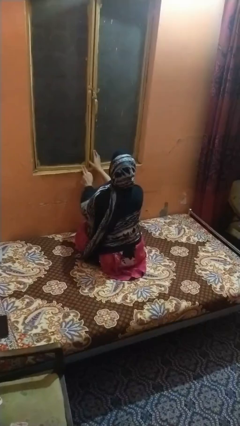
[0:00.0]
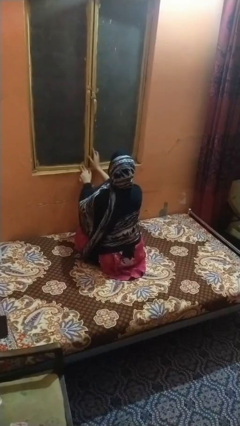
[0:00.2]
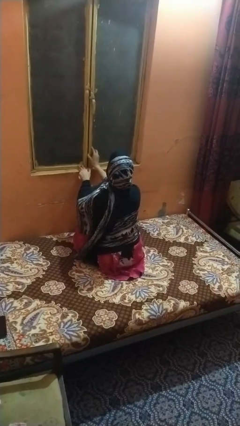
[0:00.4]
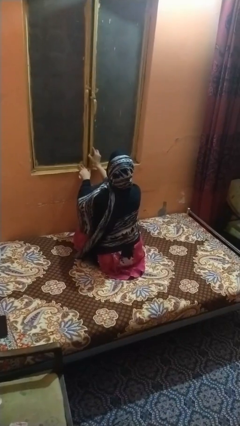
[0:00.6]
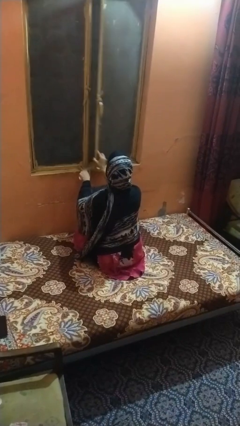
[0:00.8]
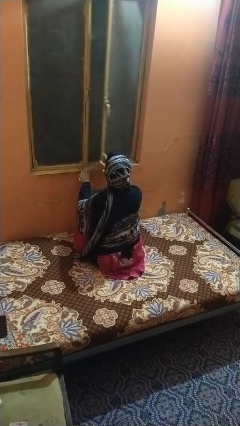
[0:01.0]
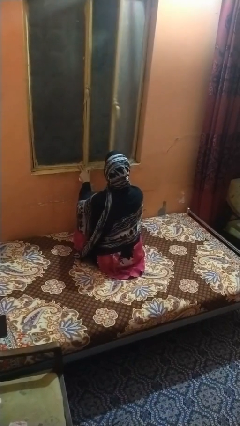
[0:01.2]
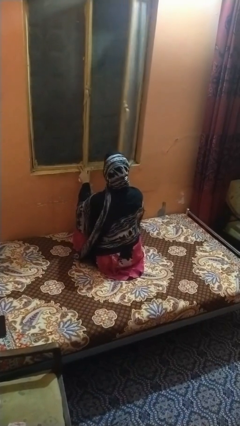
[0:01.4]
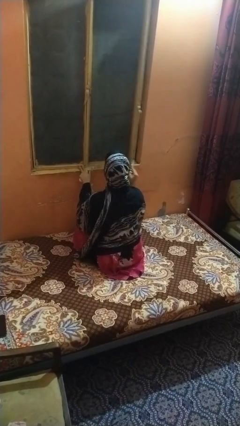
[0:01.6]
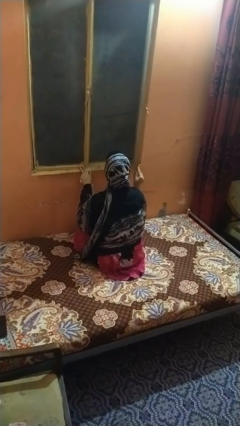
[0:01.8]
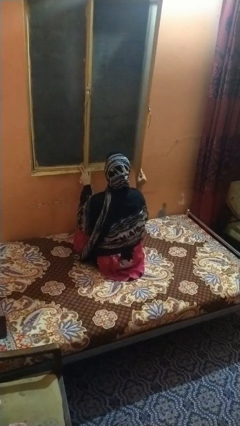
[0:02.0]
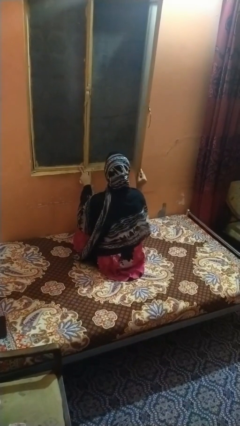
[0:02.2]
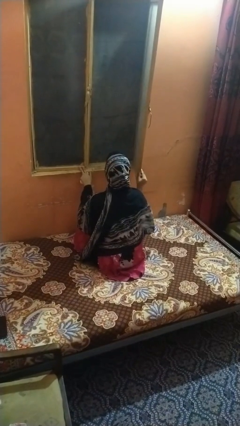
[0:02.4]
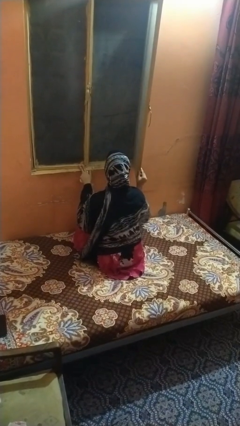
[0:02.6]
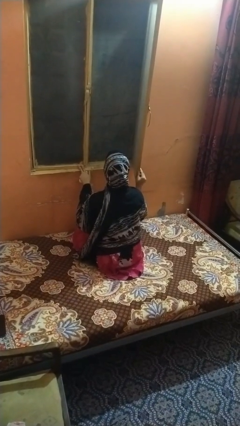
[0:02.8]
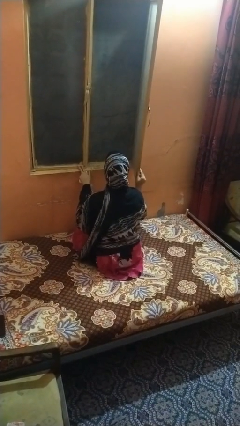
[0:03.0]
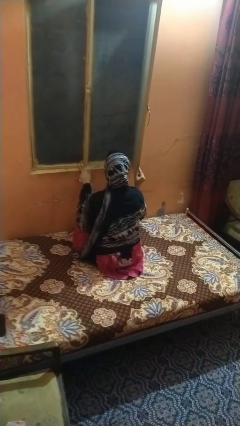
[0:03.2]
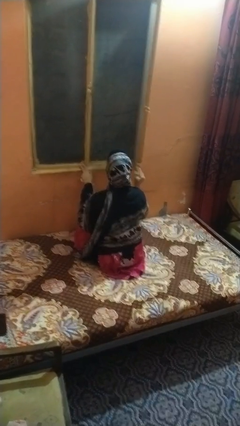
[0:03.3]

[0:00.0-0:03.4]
person opens home window

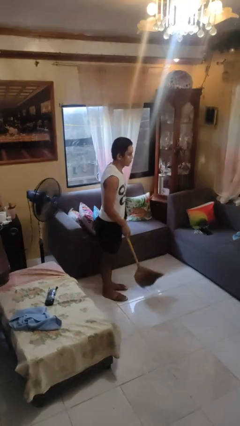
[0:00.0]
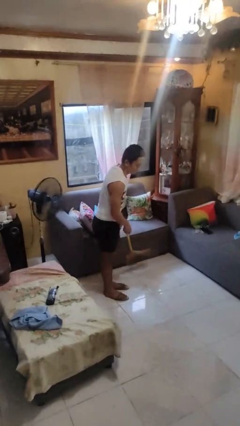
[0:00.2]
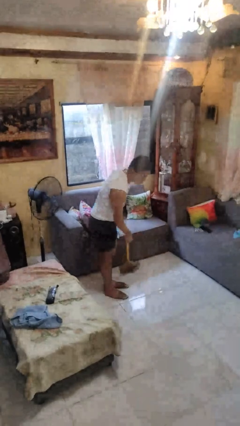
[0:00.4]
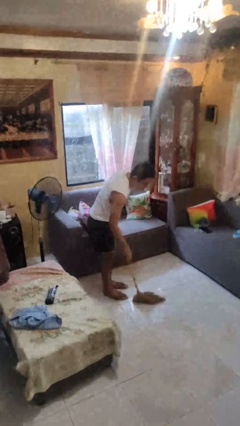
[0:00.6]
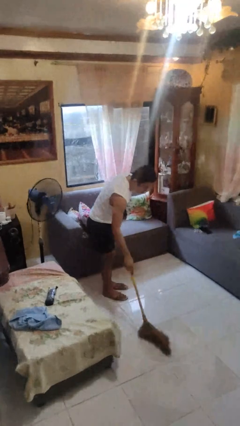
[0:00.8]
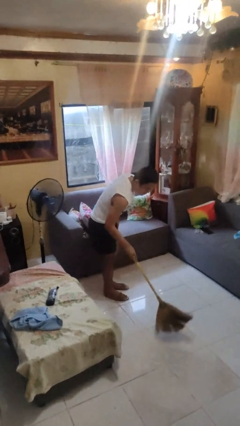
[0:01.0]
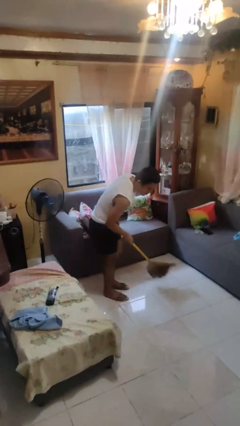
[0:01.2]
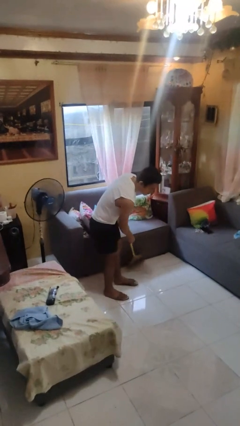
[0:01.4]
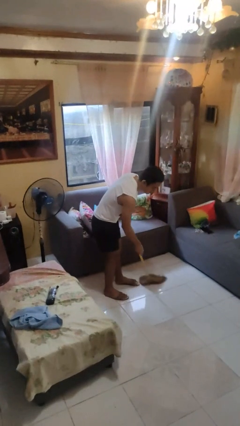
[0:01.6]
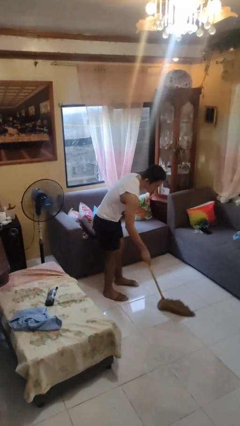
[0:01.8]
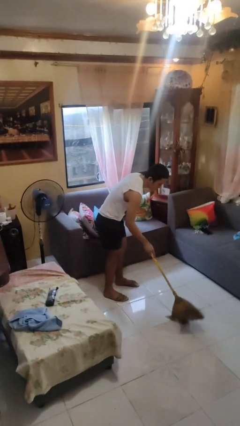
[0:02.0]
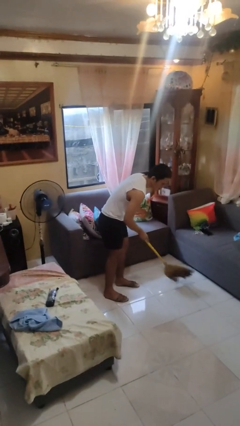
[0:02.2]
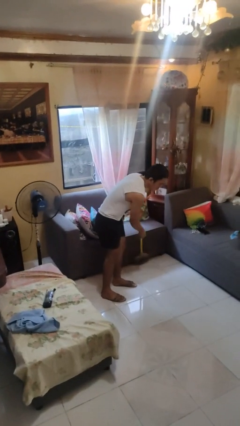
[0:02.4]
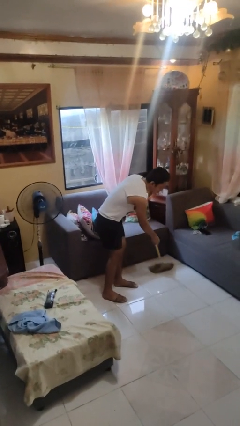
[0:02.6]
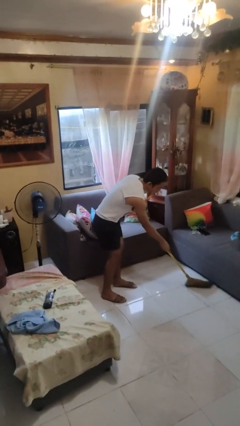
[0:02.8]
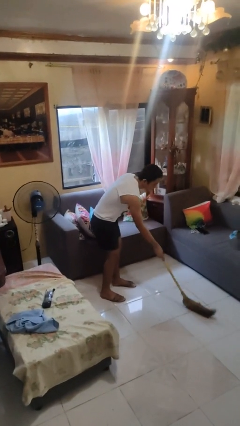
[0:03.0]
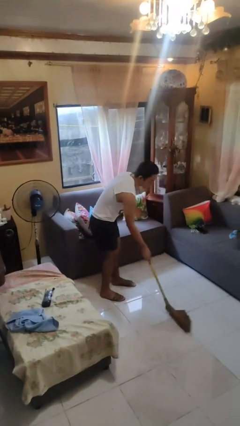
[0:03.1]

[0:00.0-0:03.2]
person sweeps floor

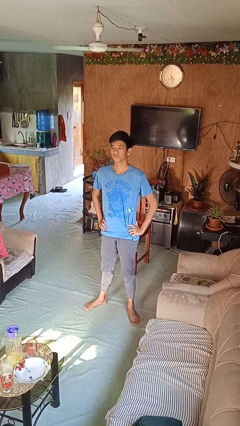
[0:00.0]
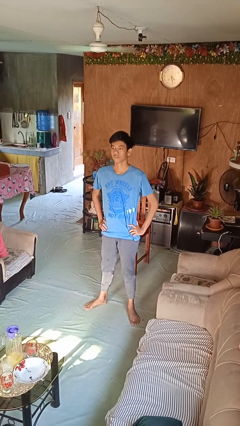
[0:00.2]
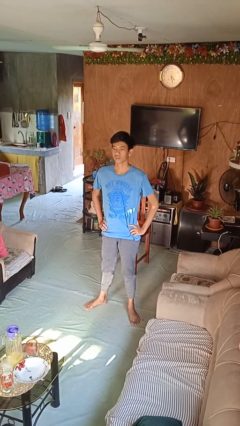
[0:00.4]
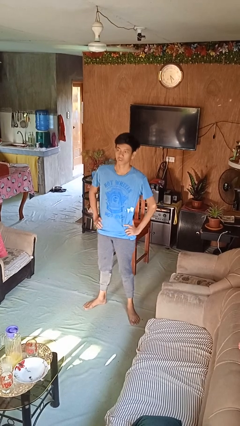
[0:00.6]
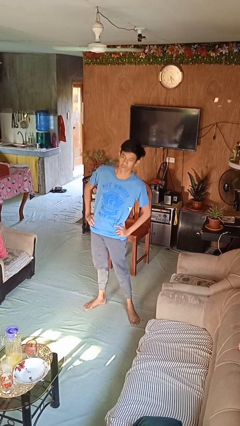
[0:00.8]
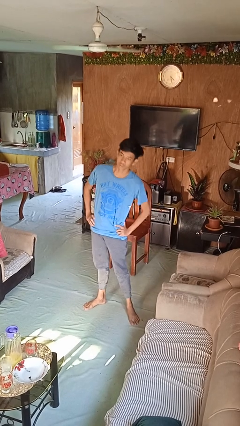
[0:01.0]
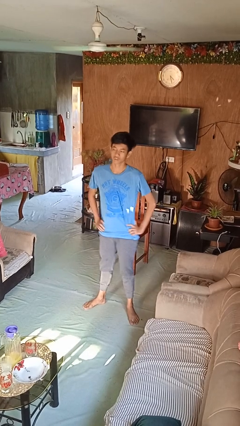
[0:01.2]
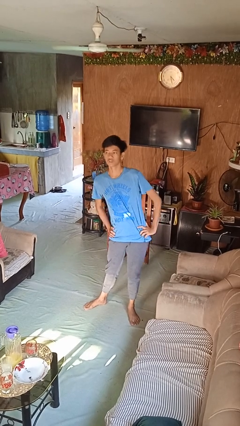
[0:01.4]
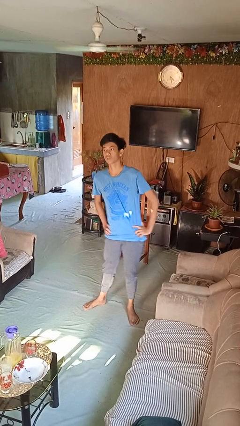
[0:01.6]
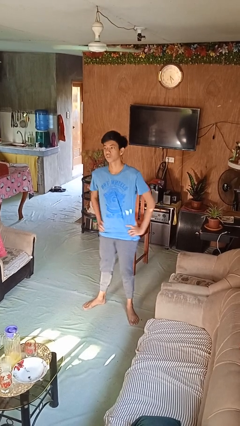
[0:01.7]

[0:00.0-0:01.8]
person wiggles hips

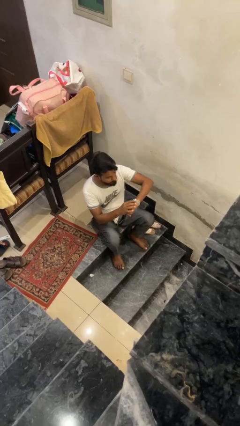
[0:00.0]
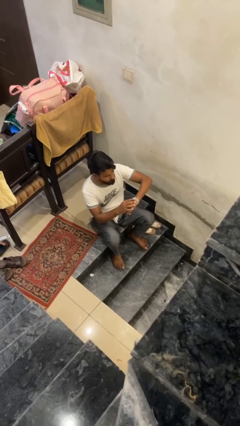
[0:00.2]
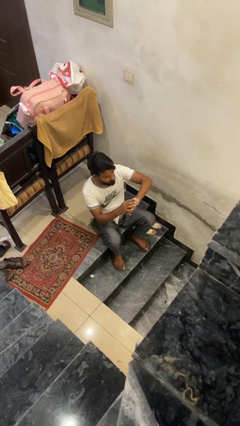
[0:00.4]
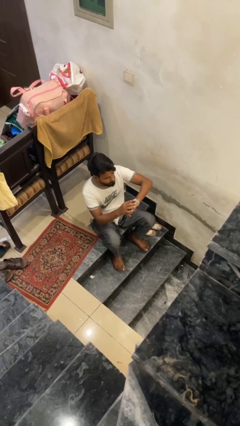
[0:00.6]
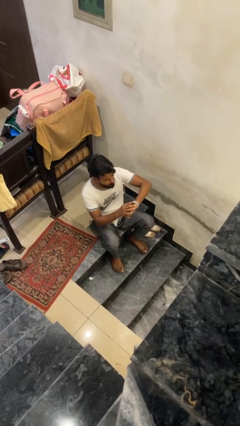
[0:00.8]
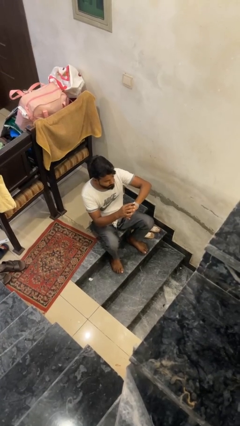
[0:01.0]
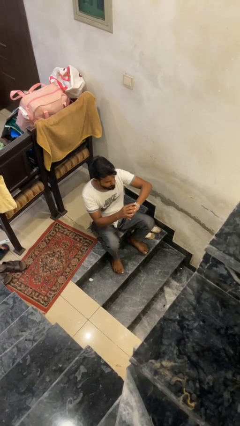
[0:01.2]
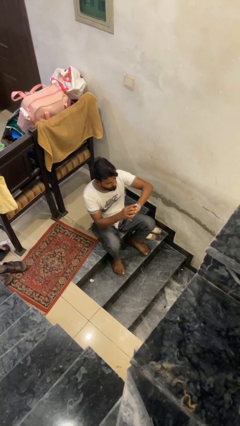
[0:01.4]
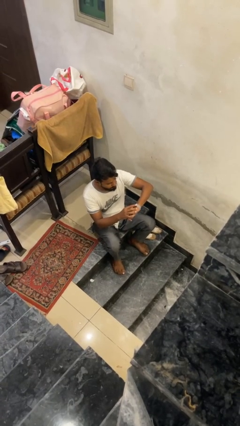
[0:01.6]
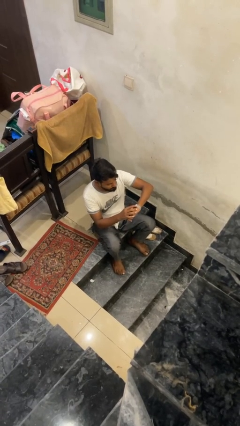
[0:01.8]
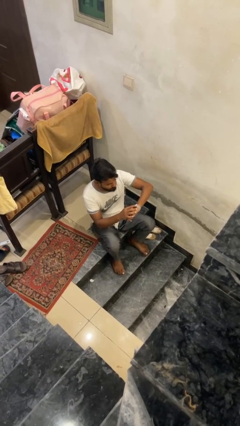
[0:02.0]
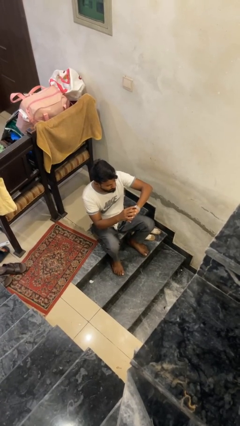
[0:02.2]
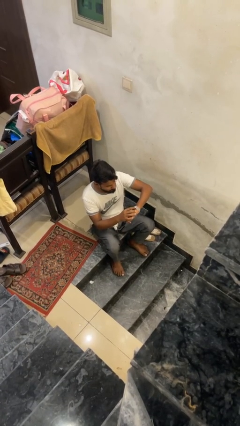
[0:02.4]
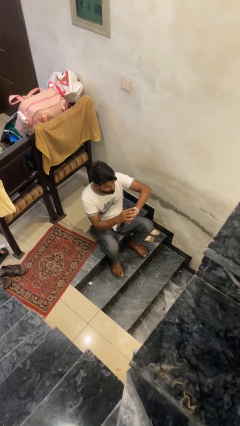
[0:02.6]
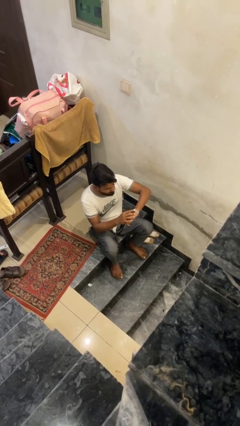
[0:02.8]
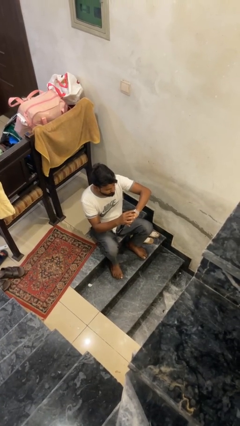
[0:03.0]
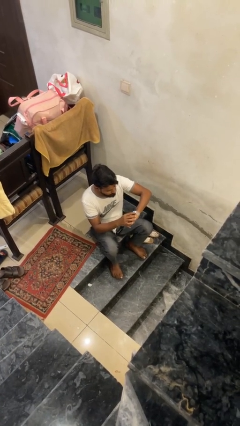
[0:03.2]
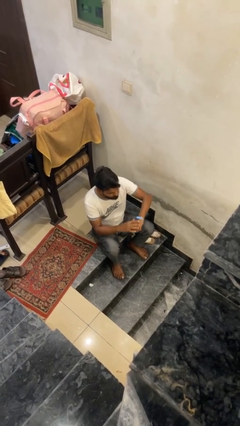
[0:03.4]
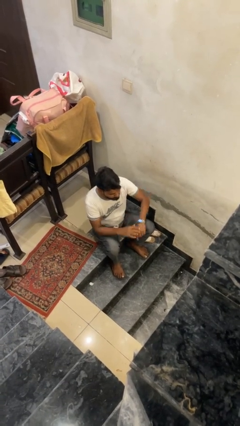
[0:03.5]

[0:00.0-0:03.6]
person looks at wristwatch

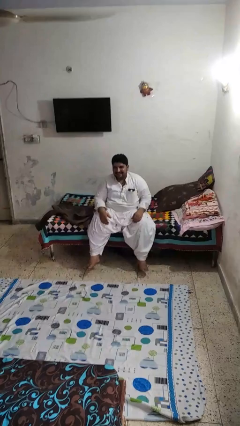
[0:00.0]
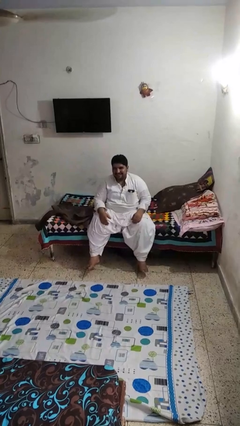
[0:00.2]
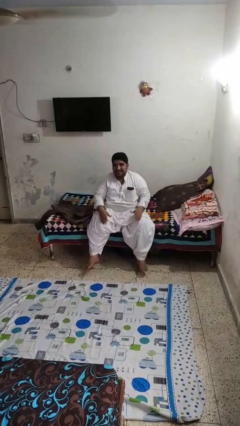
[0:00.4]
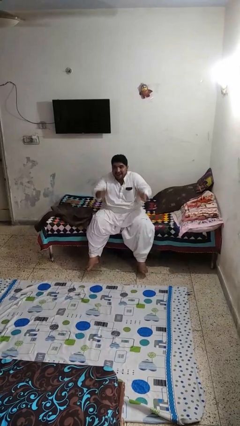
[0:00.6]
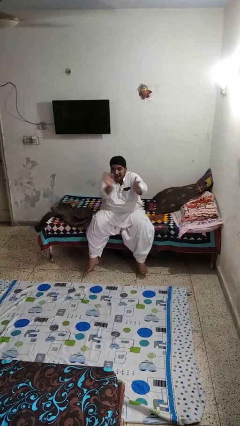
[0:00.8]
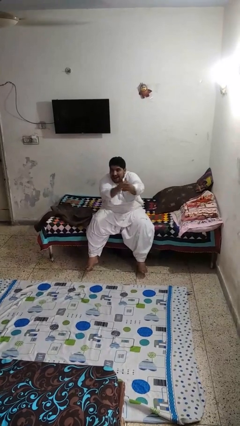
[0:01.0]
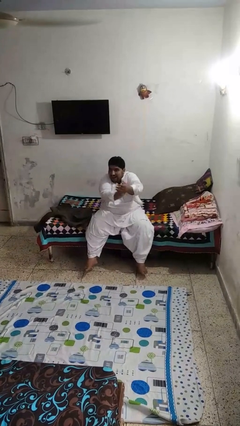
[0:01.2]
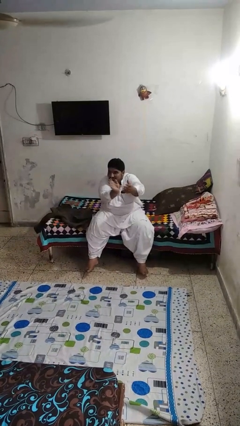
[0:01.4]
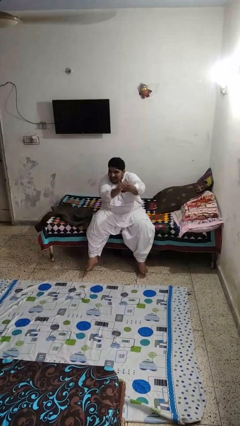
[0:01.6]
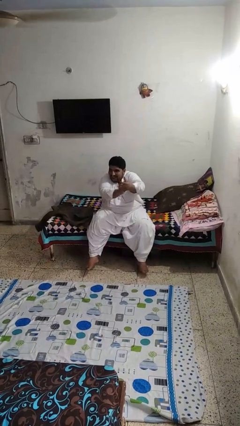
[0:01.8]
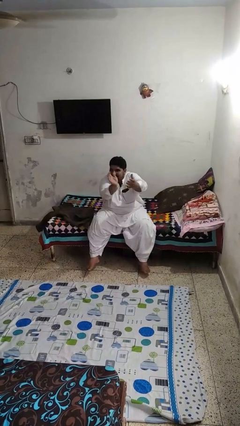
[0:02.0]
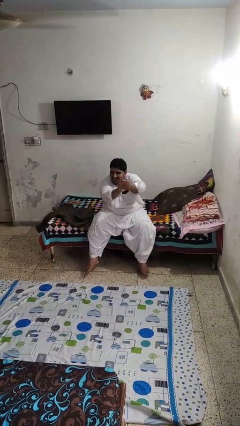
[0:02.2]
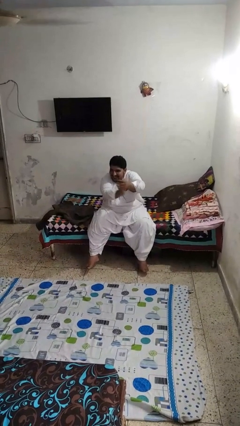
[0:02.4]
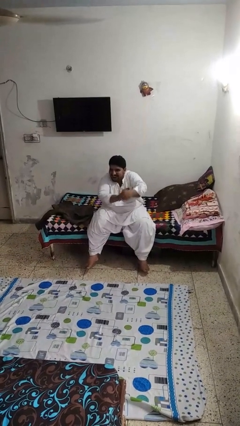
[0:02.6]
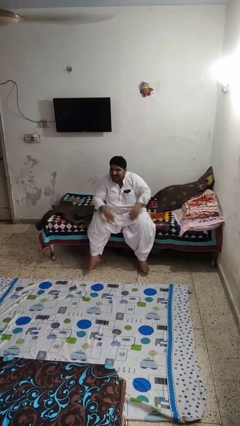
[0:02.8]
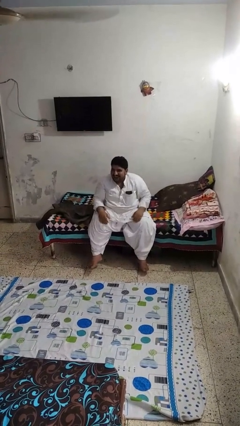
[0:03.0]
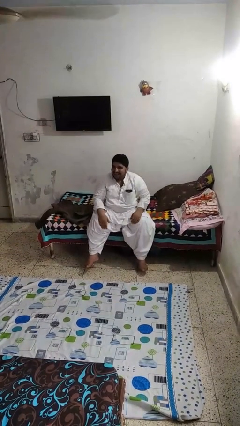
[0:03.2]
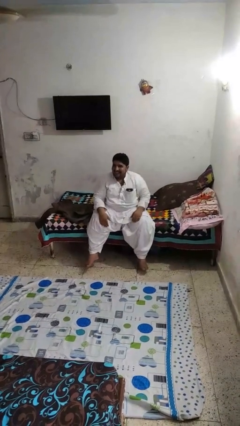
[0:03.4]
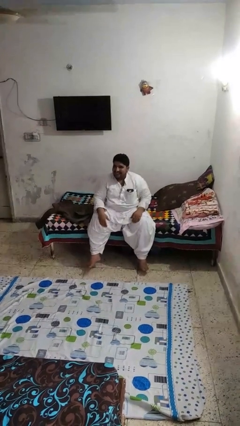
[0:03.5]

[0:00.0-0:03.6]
person claps hands

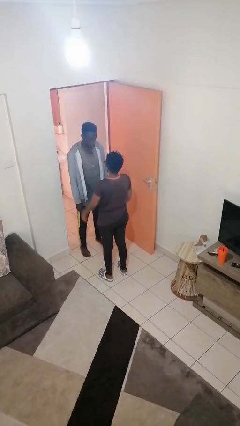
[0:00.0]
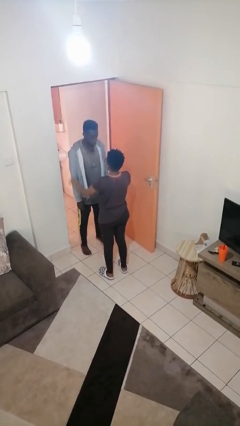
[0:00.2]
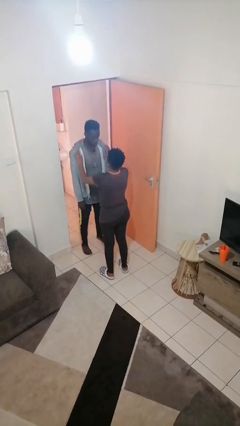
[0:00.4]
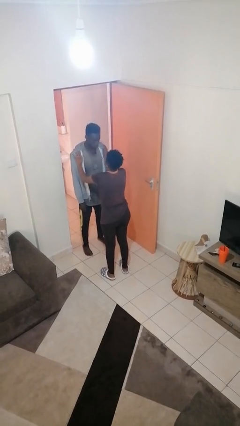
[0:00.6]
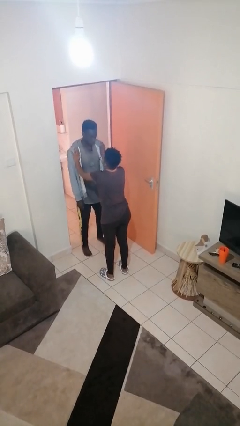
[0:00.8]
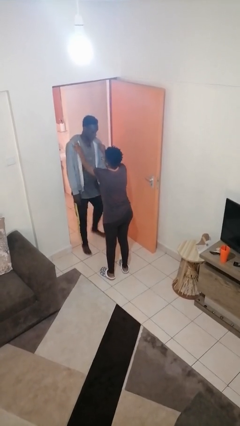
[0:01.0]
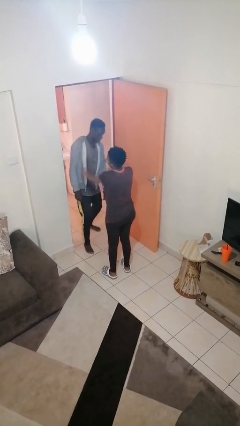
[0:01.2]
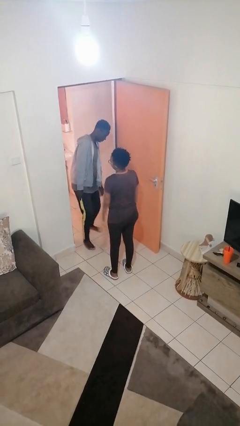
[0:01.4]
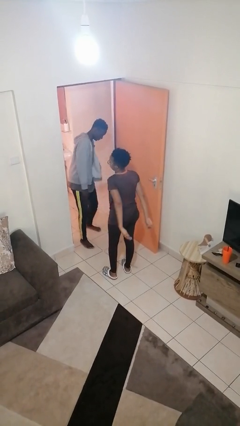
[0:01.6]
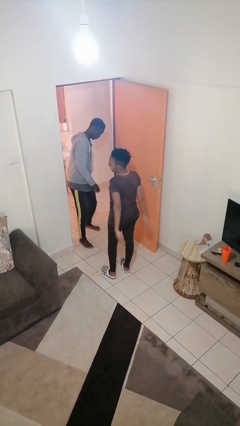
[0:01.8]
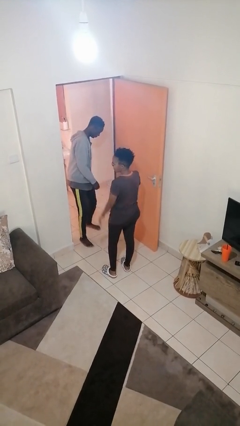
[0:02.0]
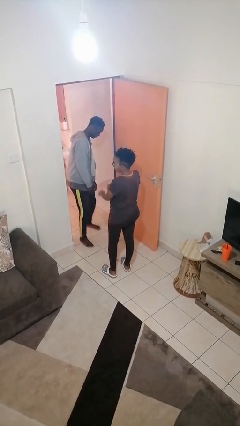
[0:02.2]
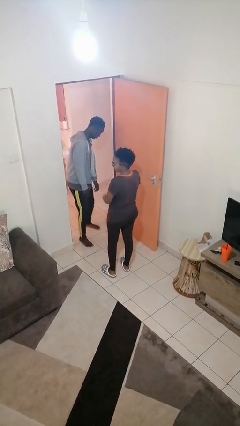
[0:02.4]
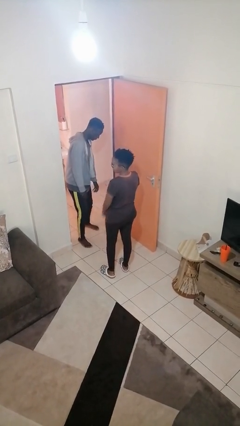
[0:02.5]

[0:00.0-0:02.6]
person shoves person
